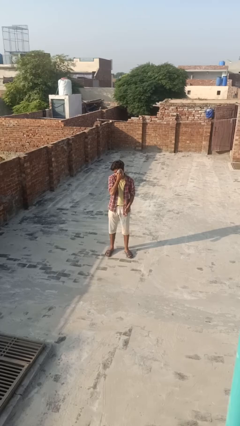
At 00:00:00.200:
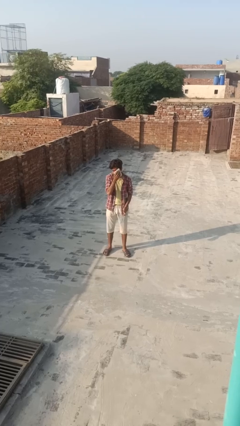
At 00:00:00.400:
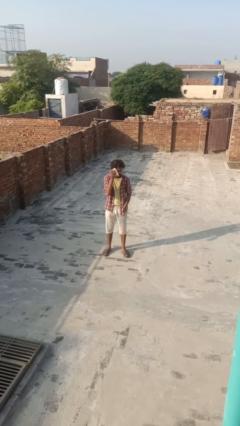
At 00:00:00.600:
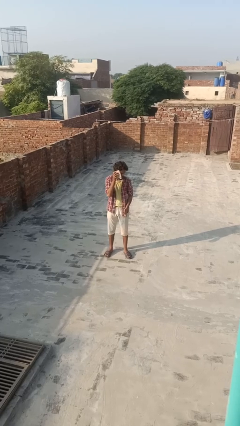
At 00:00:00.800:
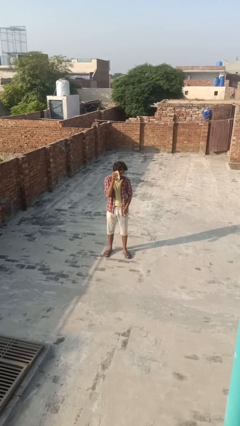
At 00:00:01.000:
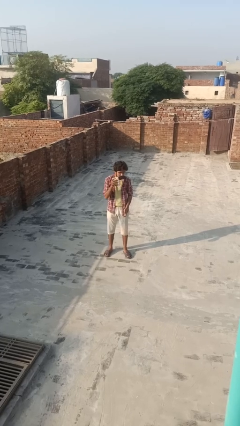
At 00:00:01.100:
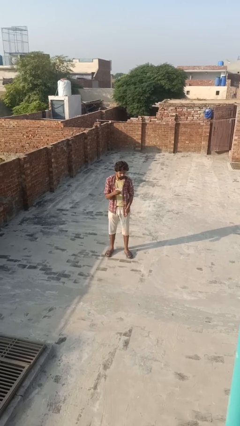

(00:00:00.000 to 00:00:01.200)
person wipes mouth with napkin

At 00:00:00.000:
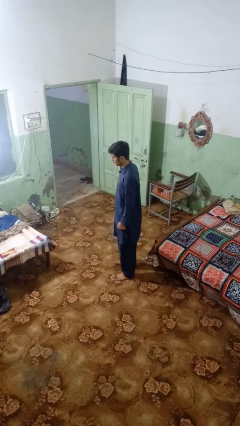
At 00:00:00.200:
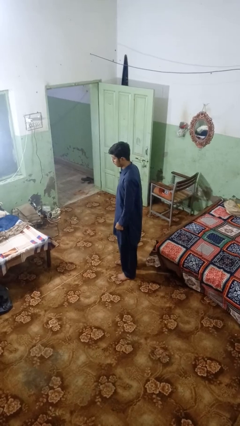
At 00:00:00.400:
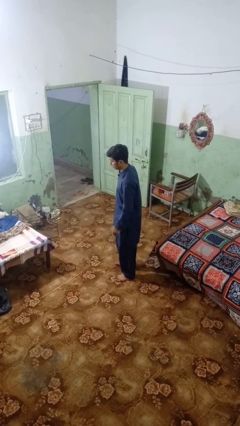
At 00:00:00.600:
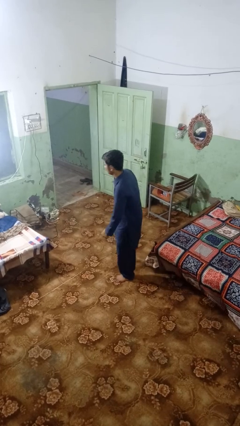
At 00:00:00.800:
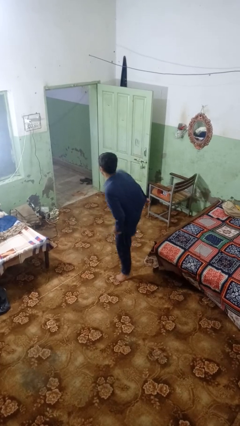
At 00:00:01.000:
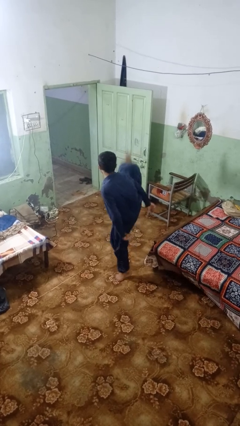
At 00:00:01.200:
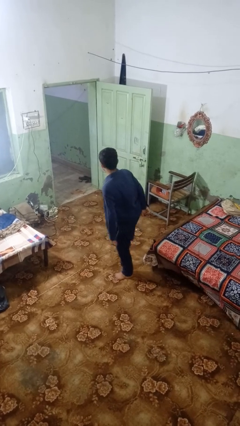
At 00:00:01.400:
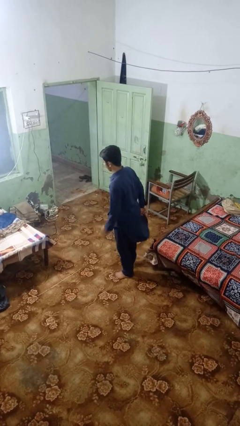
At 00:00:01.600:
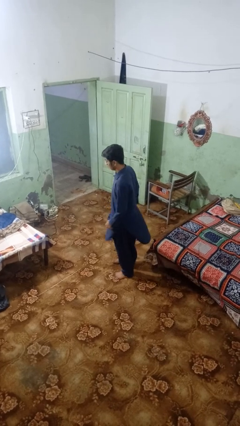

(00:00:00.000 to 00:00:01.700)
person karate kicks

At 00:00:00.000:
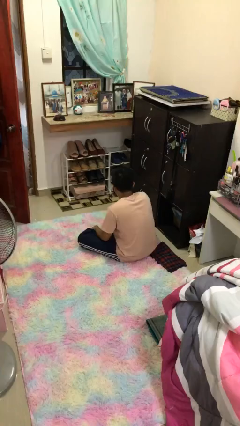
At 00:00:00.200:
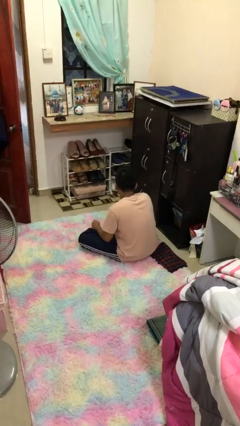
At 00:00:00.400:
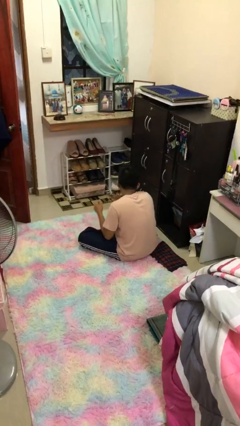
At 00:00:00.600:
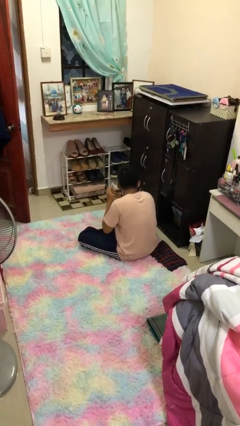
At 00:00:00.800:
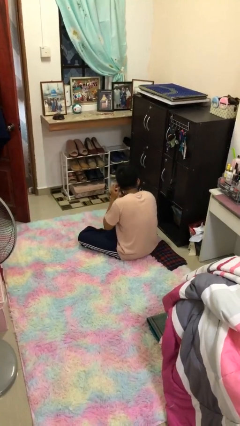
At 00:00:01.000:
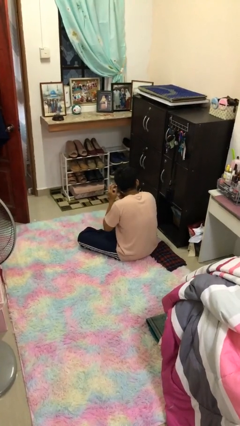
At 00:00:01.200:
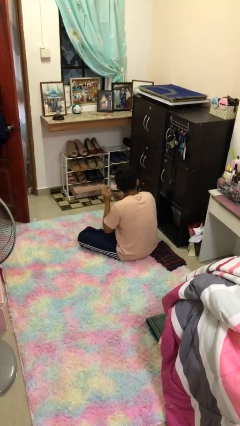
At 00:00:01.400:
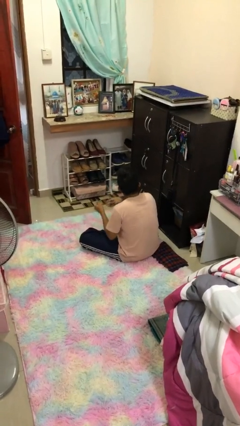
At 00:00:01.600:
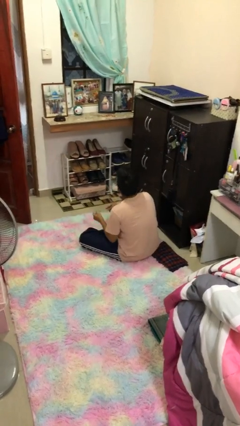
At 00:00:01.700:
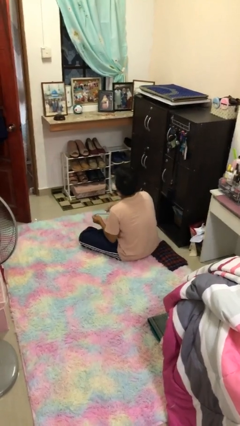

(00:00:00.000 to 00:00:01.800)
person takes off earrings

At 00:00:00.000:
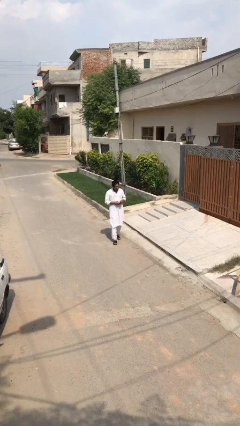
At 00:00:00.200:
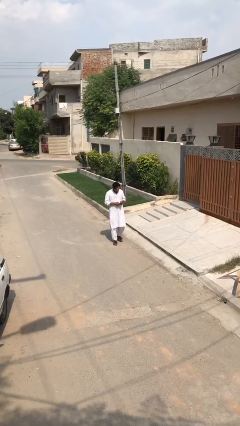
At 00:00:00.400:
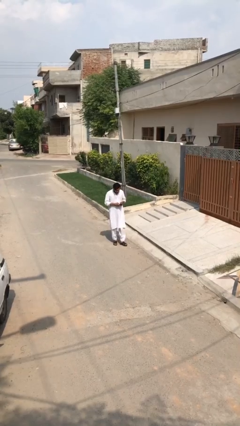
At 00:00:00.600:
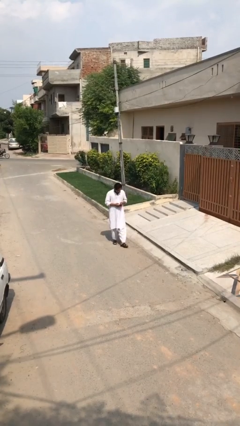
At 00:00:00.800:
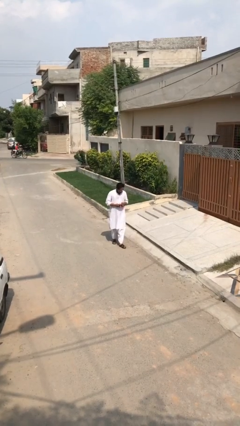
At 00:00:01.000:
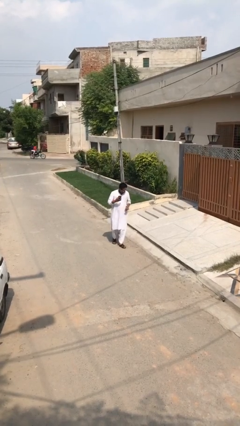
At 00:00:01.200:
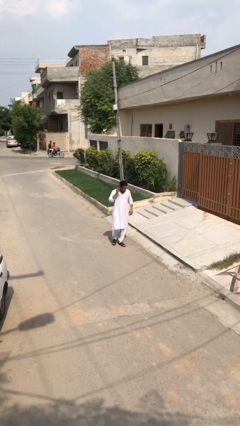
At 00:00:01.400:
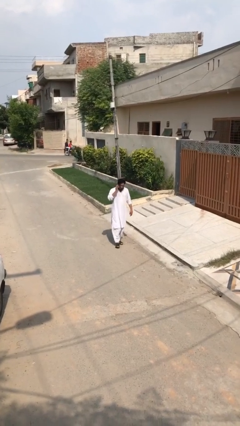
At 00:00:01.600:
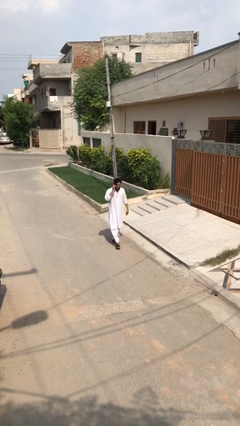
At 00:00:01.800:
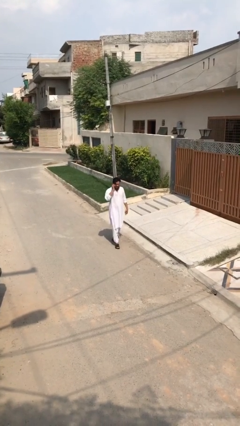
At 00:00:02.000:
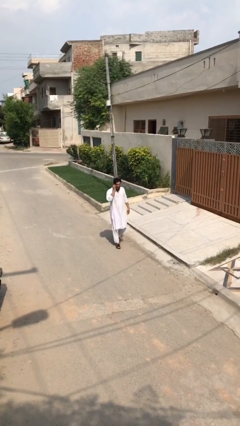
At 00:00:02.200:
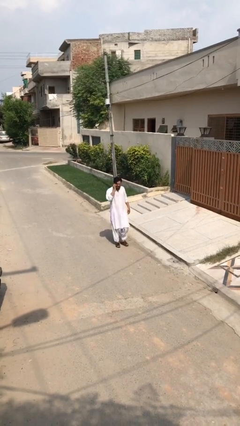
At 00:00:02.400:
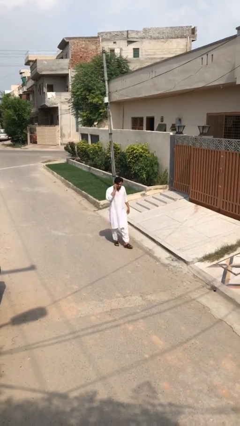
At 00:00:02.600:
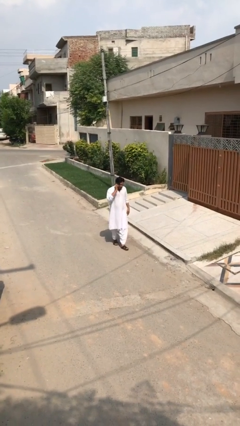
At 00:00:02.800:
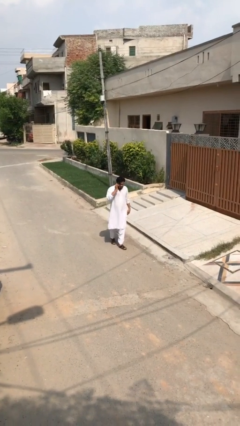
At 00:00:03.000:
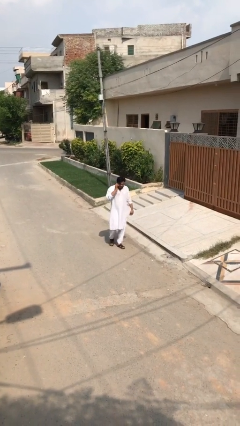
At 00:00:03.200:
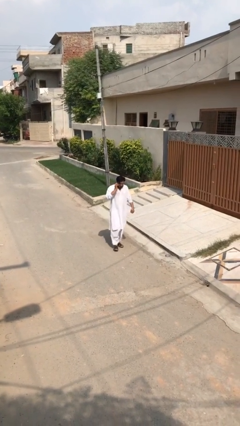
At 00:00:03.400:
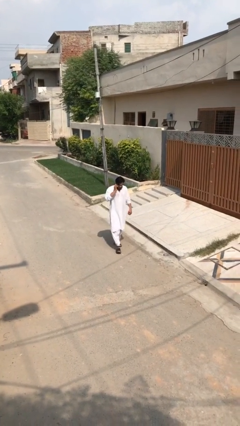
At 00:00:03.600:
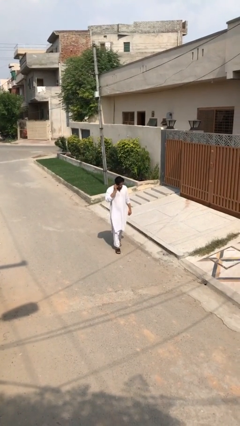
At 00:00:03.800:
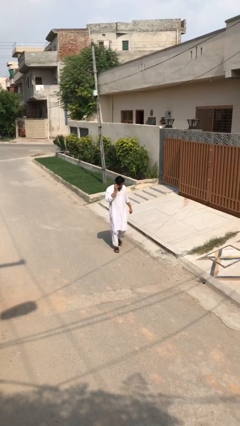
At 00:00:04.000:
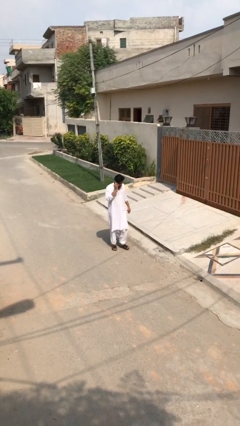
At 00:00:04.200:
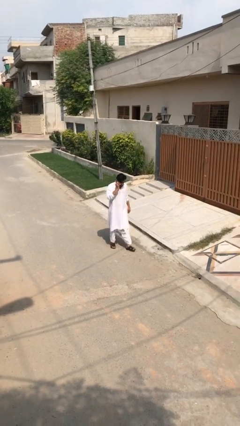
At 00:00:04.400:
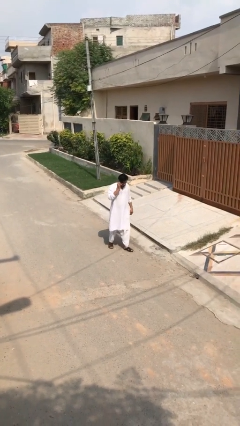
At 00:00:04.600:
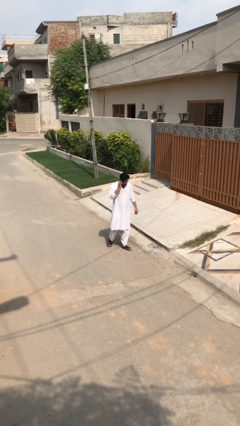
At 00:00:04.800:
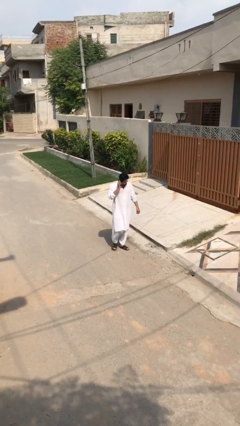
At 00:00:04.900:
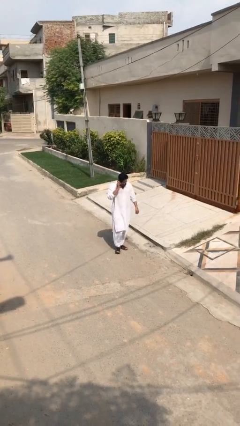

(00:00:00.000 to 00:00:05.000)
person talks on phone

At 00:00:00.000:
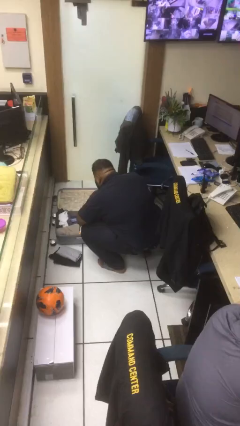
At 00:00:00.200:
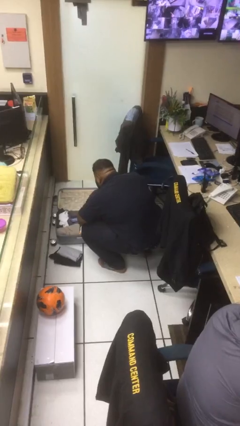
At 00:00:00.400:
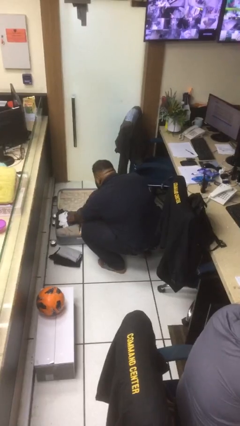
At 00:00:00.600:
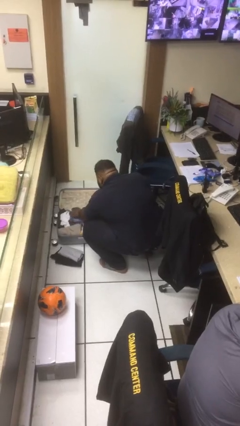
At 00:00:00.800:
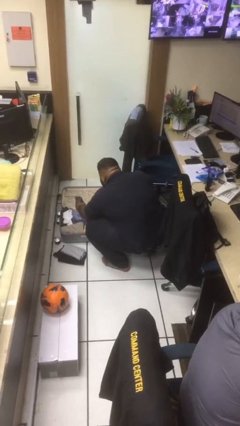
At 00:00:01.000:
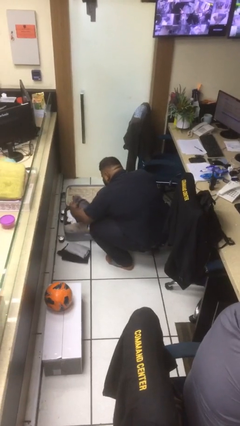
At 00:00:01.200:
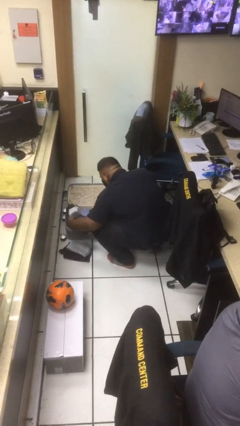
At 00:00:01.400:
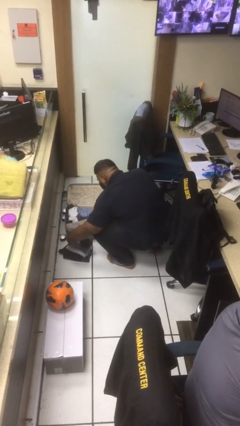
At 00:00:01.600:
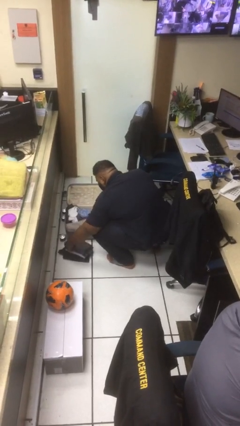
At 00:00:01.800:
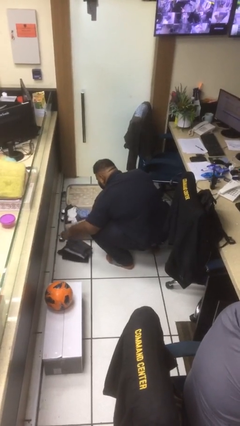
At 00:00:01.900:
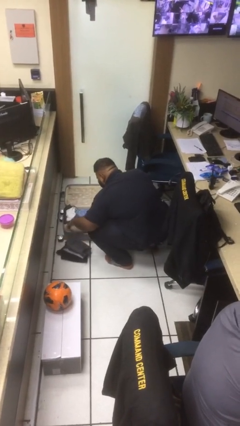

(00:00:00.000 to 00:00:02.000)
person unloads clothes from suitcase

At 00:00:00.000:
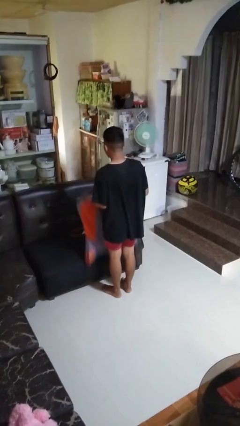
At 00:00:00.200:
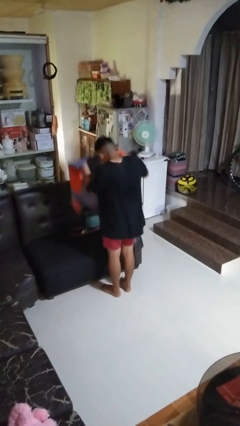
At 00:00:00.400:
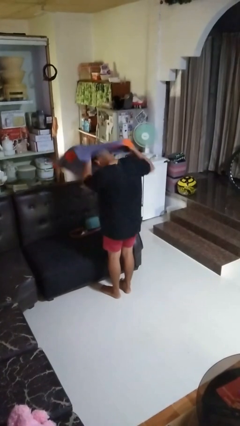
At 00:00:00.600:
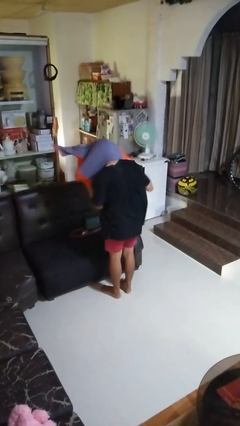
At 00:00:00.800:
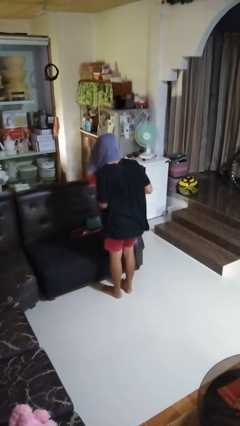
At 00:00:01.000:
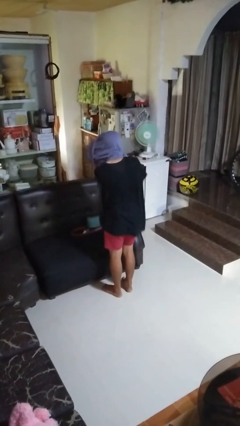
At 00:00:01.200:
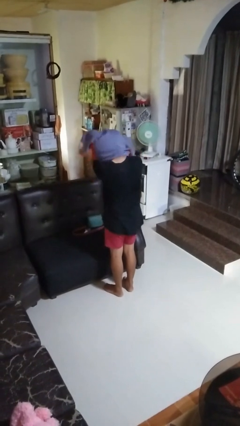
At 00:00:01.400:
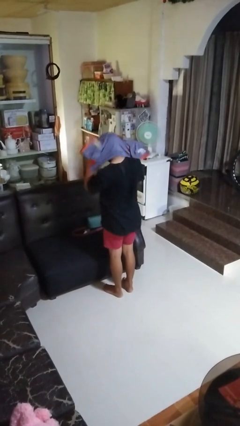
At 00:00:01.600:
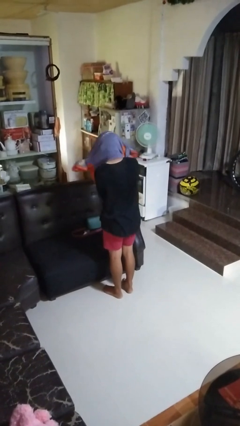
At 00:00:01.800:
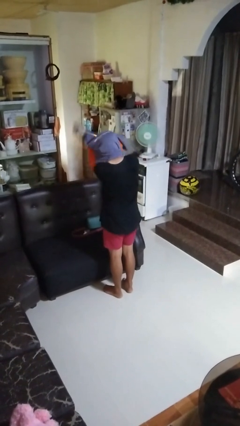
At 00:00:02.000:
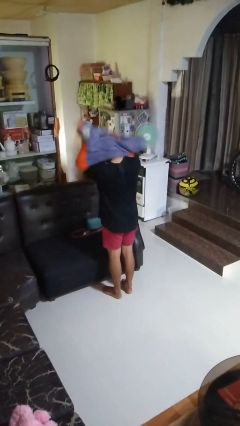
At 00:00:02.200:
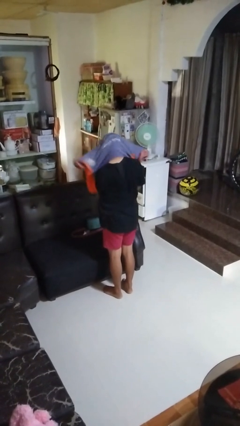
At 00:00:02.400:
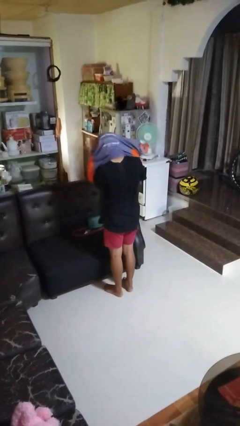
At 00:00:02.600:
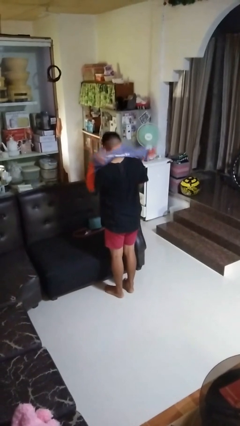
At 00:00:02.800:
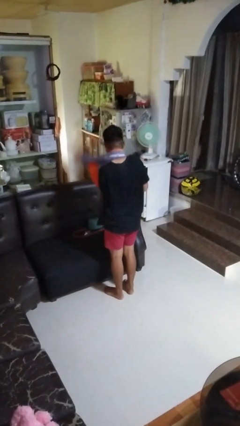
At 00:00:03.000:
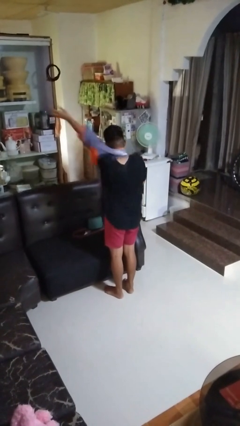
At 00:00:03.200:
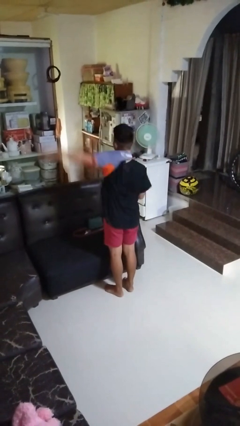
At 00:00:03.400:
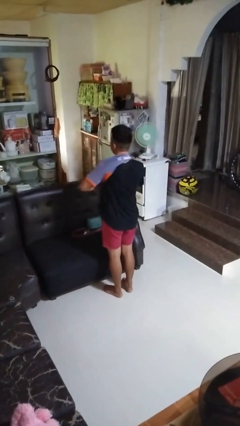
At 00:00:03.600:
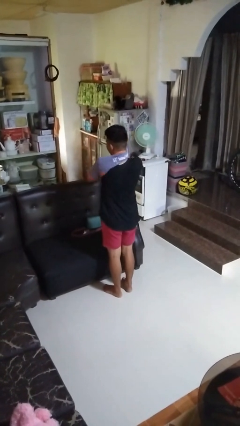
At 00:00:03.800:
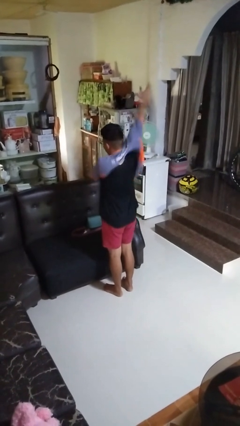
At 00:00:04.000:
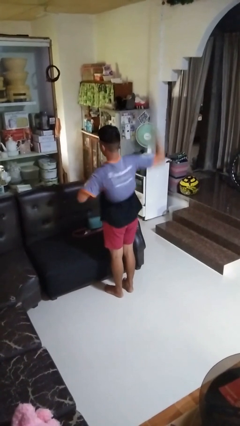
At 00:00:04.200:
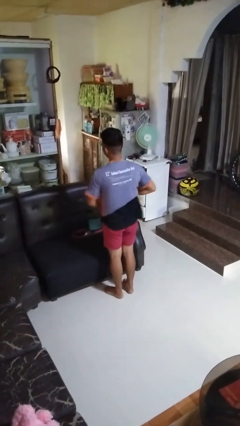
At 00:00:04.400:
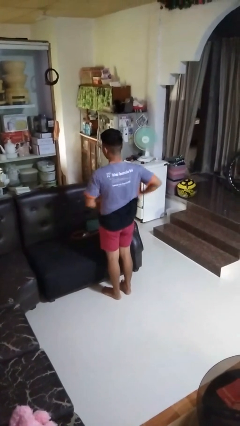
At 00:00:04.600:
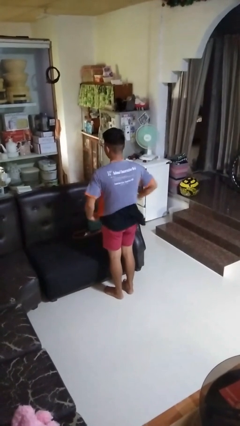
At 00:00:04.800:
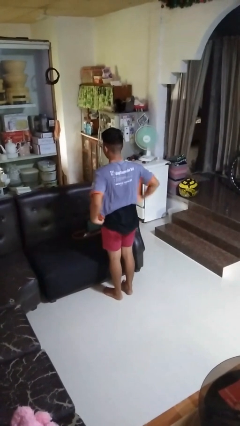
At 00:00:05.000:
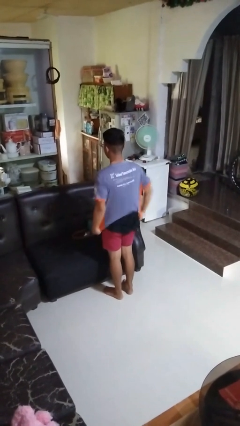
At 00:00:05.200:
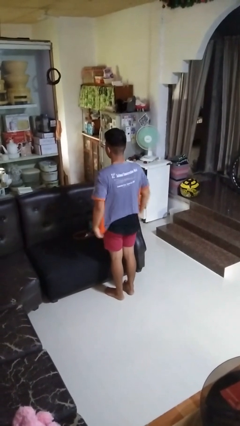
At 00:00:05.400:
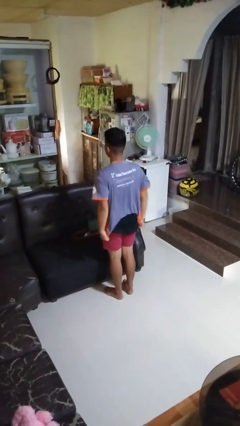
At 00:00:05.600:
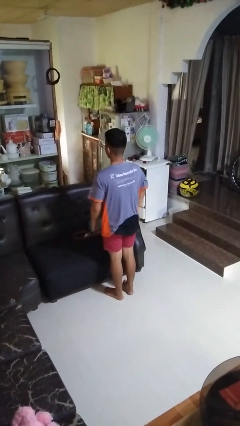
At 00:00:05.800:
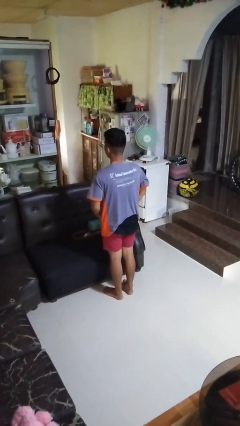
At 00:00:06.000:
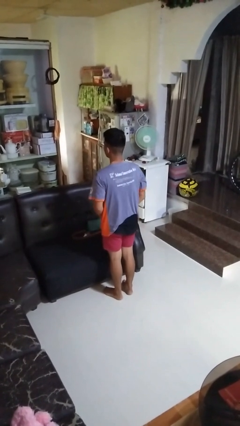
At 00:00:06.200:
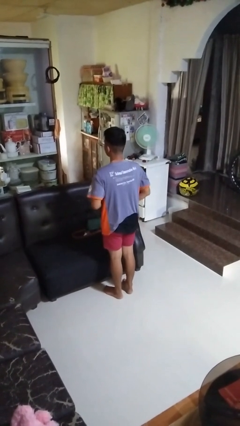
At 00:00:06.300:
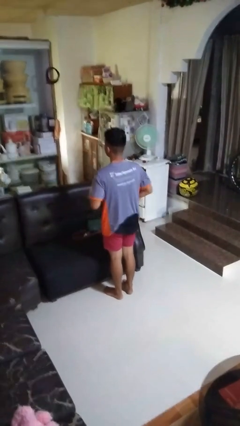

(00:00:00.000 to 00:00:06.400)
person puts on shirt
